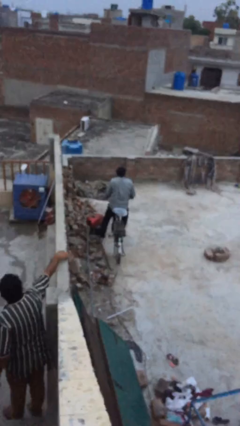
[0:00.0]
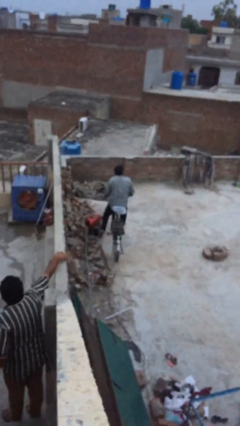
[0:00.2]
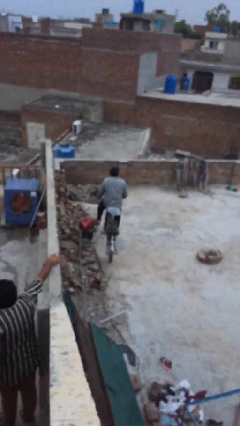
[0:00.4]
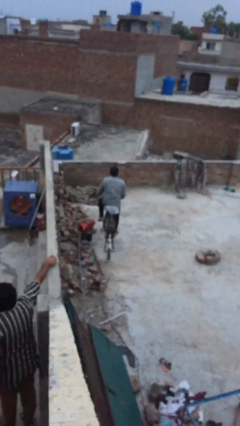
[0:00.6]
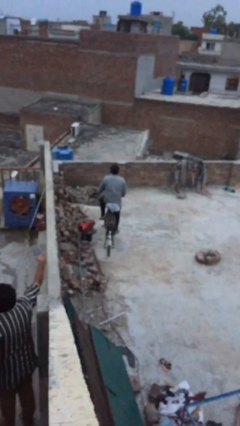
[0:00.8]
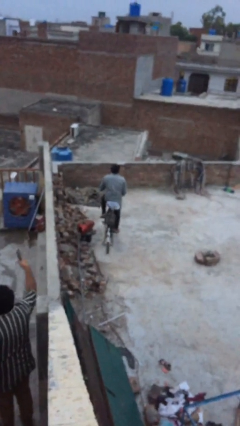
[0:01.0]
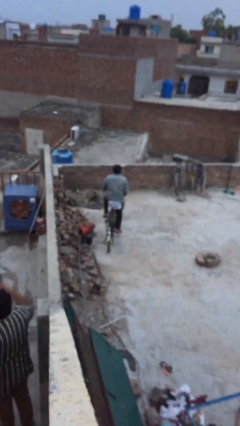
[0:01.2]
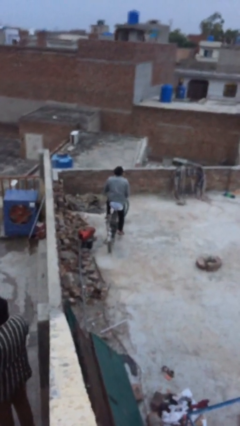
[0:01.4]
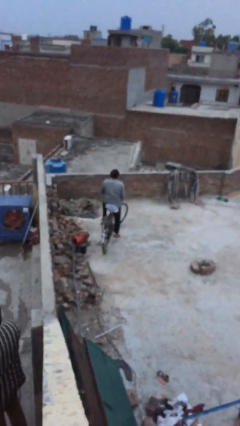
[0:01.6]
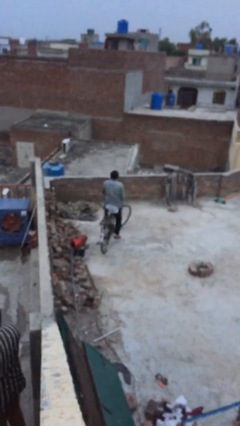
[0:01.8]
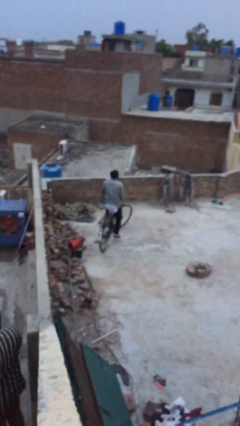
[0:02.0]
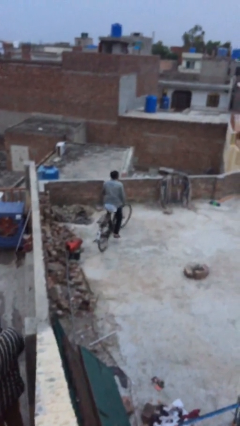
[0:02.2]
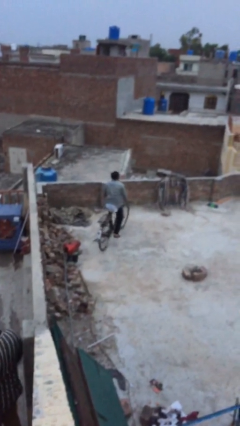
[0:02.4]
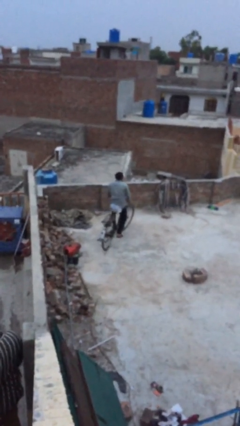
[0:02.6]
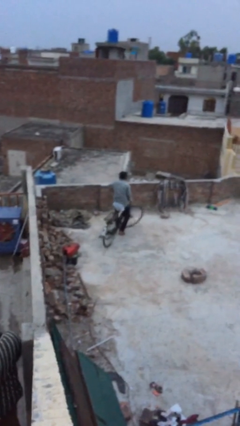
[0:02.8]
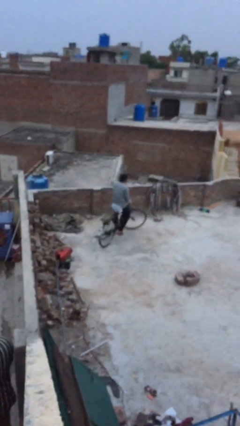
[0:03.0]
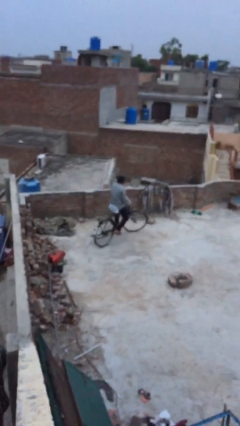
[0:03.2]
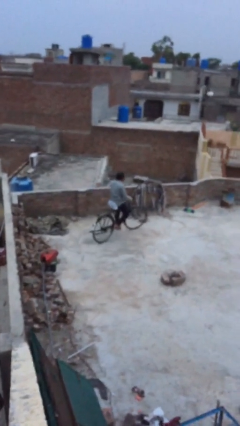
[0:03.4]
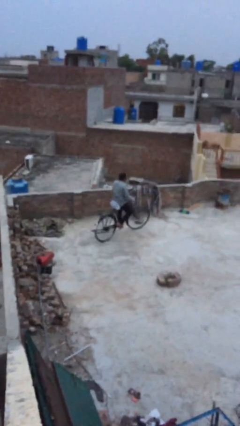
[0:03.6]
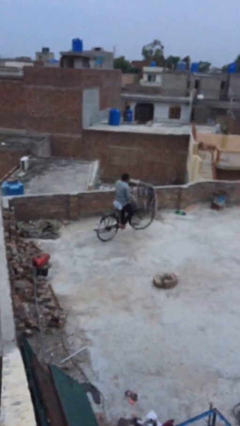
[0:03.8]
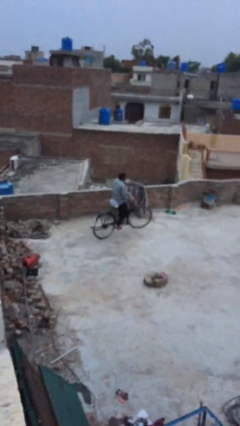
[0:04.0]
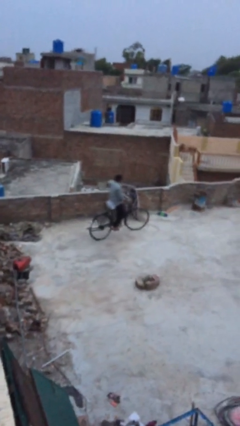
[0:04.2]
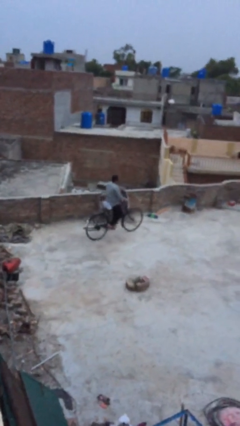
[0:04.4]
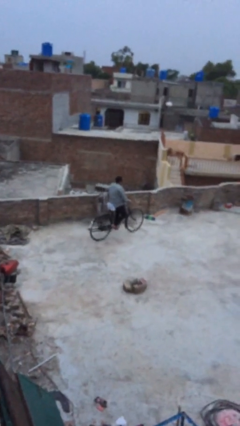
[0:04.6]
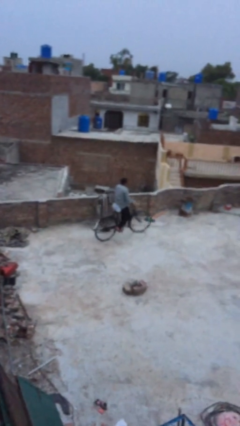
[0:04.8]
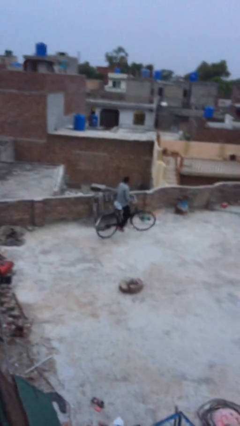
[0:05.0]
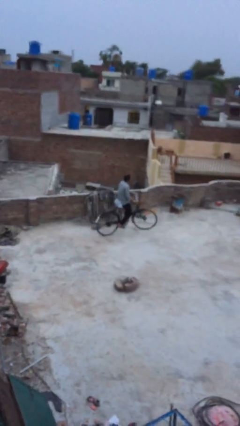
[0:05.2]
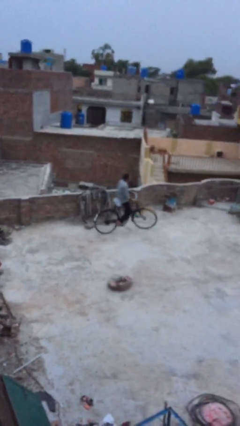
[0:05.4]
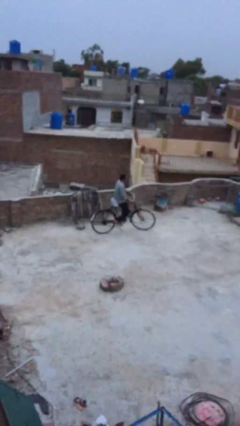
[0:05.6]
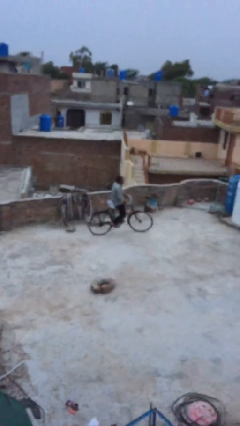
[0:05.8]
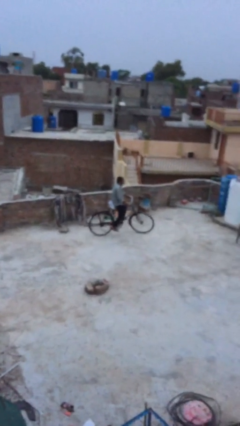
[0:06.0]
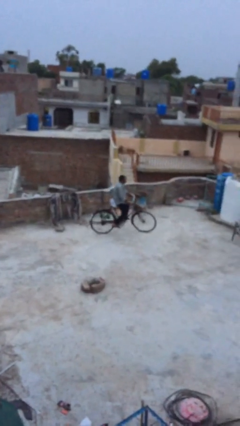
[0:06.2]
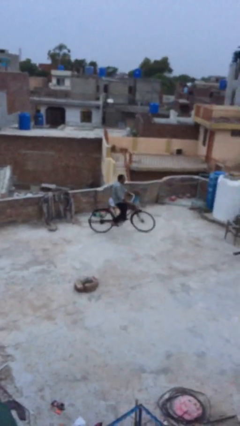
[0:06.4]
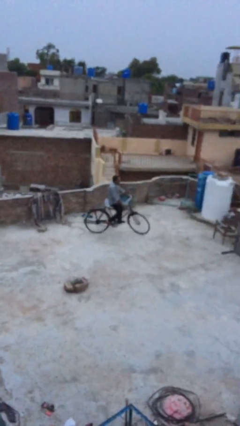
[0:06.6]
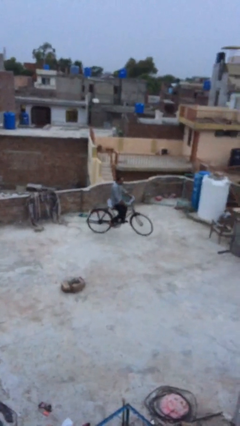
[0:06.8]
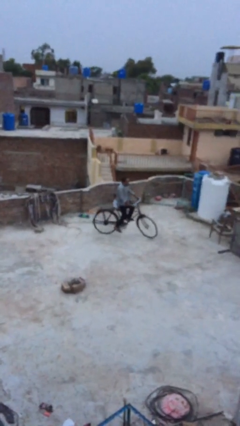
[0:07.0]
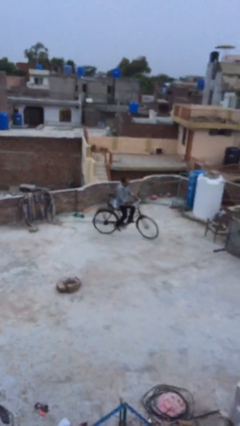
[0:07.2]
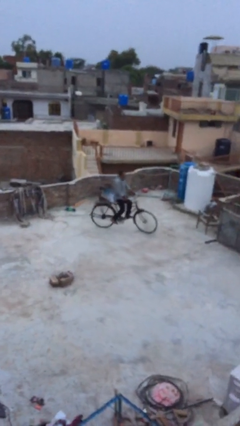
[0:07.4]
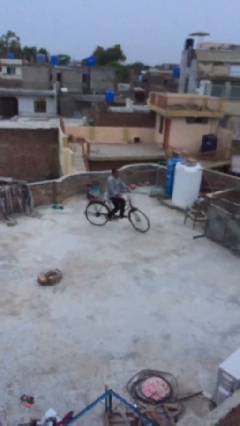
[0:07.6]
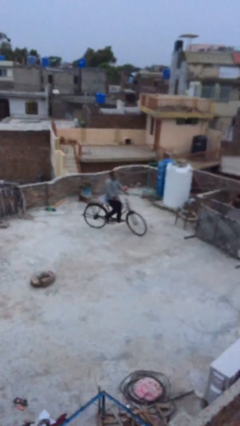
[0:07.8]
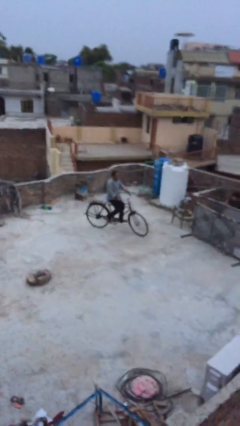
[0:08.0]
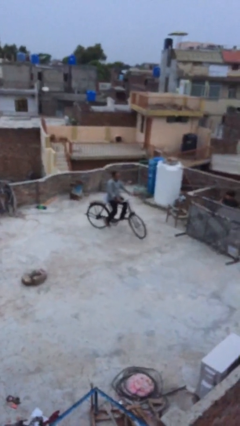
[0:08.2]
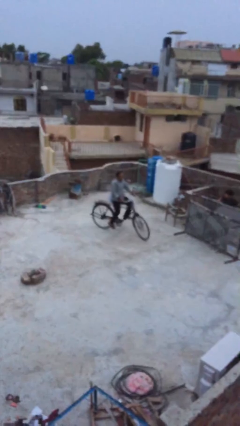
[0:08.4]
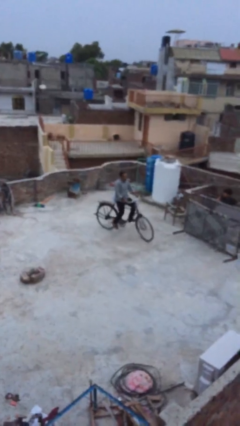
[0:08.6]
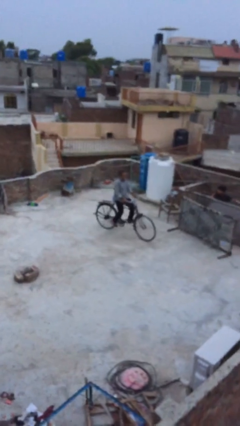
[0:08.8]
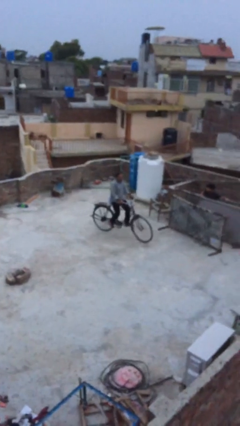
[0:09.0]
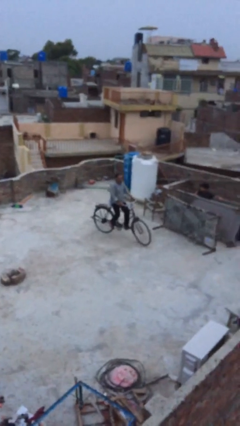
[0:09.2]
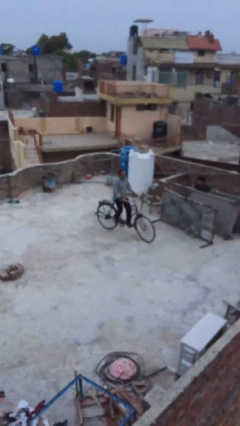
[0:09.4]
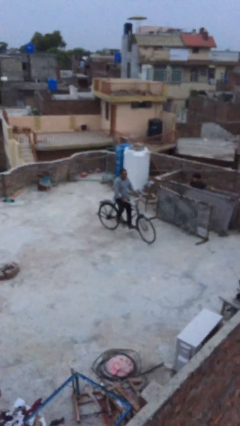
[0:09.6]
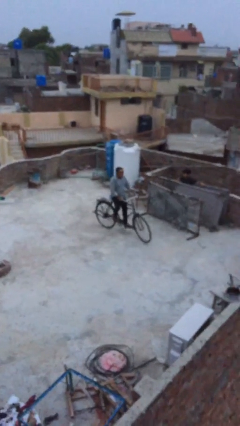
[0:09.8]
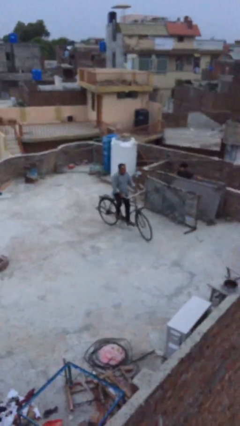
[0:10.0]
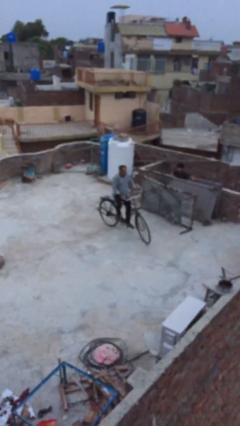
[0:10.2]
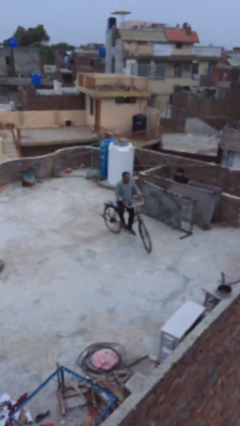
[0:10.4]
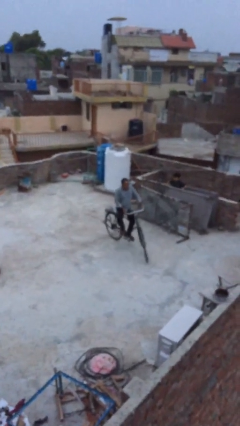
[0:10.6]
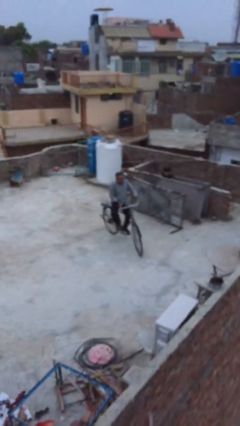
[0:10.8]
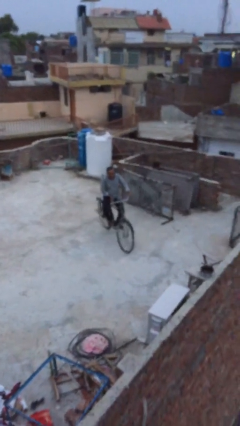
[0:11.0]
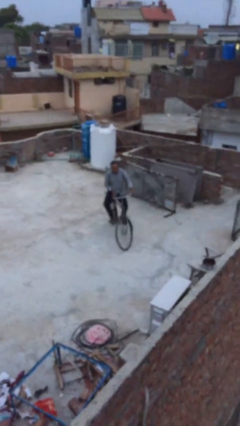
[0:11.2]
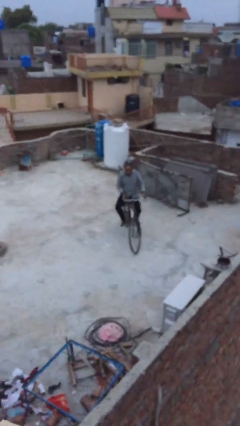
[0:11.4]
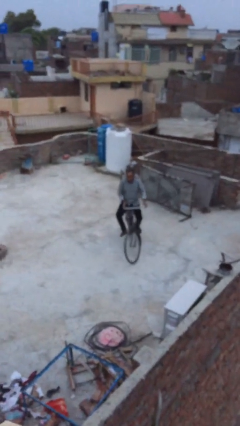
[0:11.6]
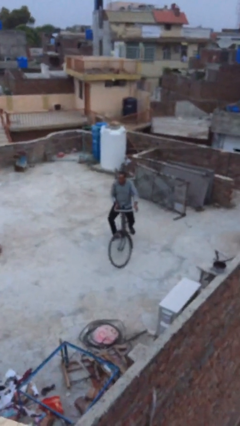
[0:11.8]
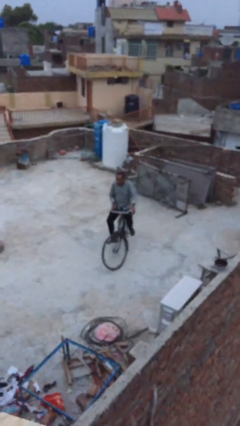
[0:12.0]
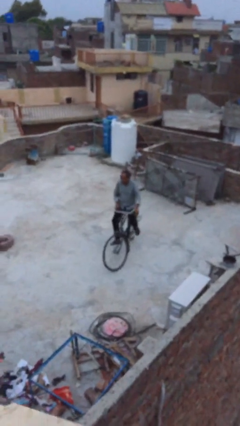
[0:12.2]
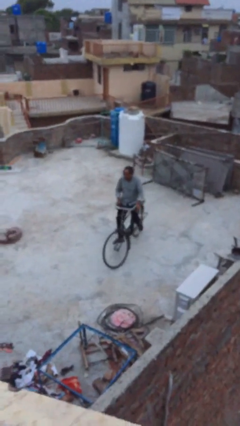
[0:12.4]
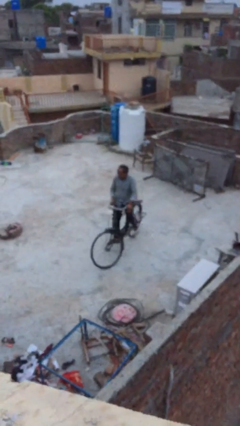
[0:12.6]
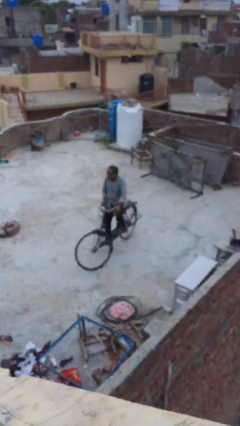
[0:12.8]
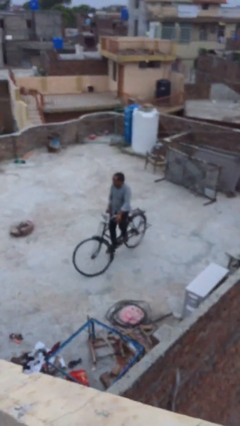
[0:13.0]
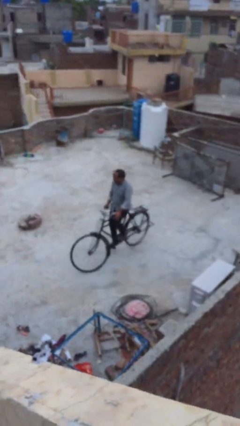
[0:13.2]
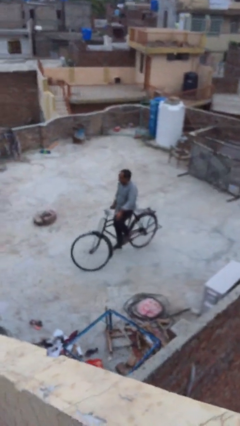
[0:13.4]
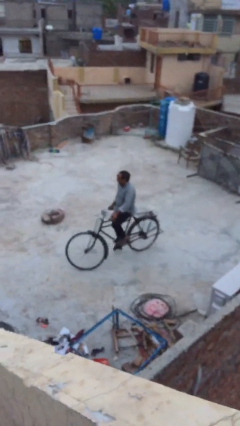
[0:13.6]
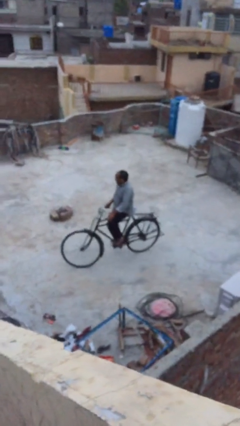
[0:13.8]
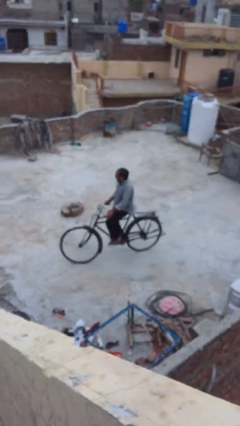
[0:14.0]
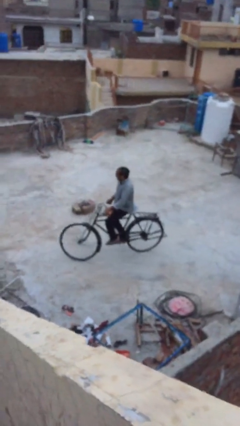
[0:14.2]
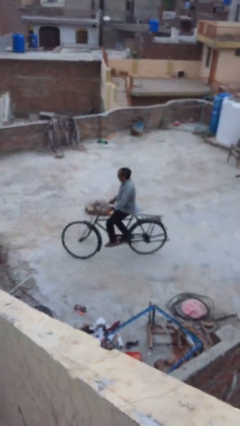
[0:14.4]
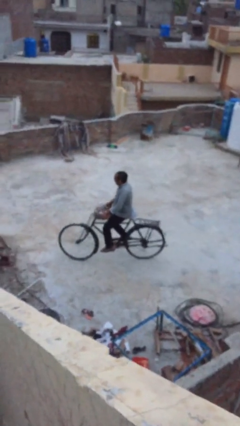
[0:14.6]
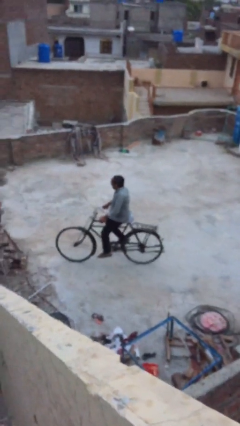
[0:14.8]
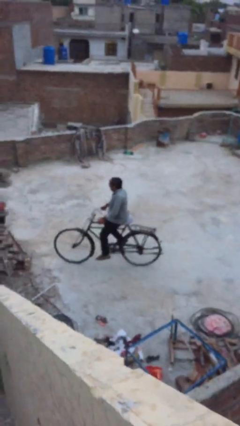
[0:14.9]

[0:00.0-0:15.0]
person rides bicycle

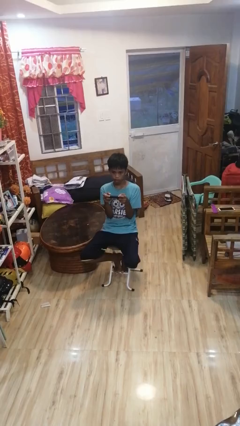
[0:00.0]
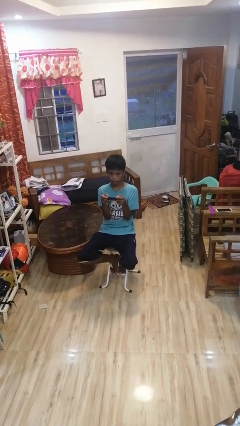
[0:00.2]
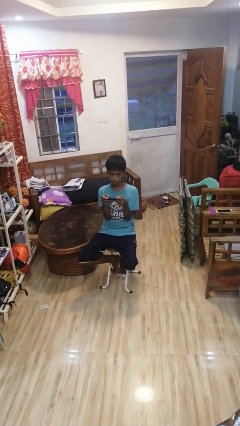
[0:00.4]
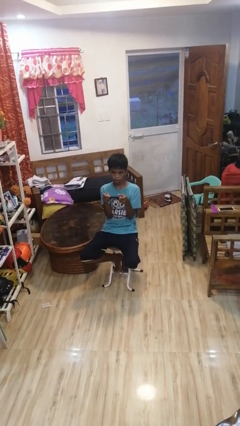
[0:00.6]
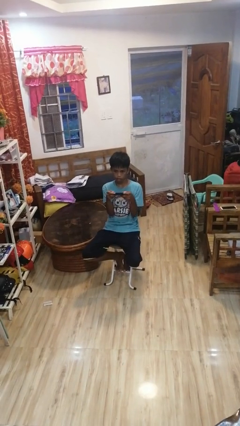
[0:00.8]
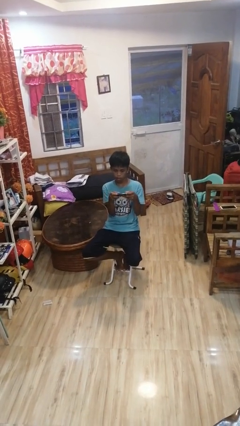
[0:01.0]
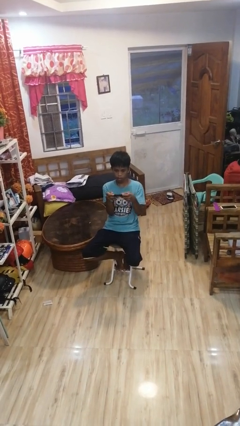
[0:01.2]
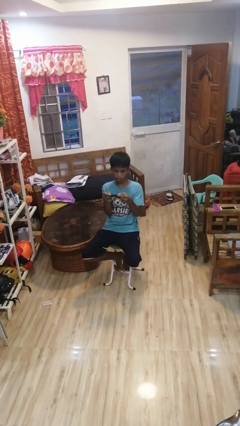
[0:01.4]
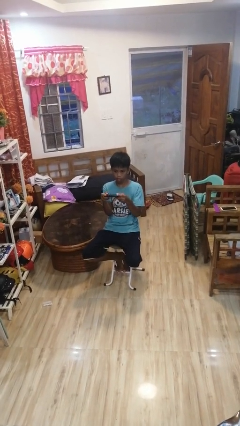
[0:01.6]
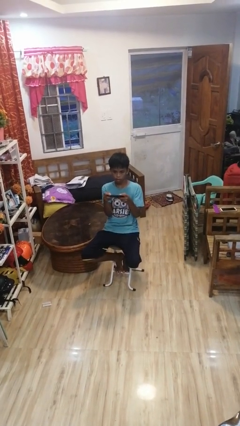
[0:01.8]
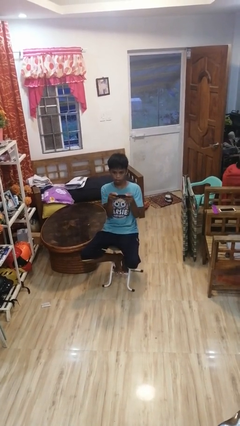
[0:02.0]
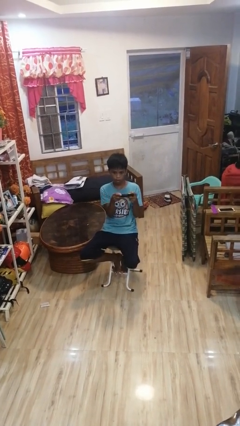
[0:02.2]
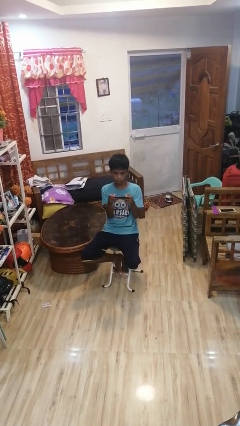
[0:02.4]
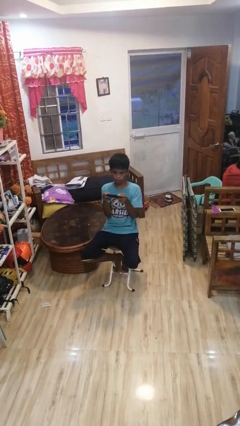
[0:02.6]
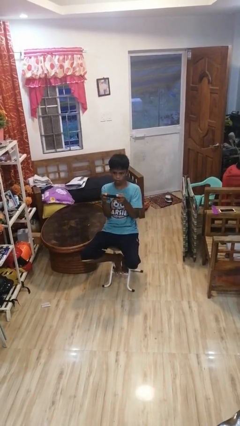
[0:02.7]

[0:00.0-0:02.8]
person interacts with handheld game

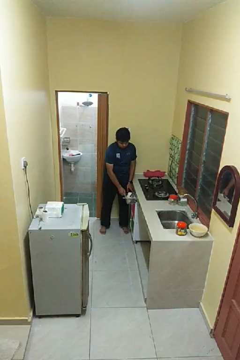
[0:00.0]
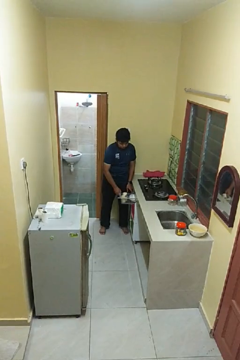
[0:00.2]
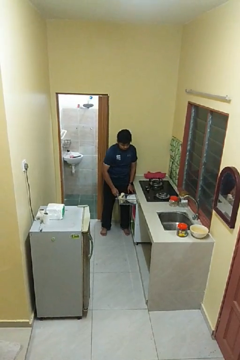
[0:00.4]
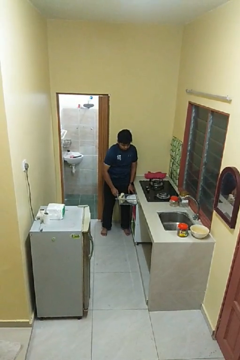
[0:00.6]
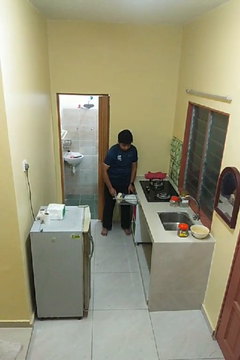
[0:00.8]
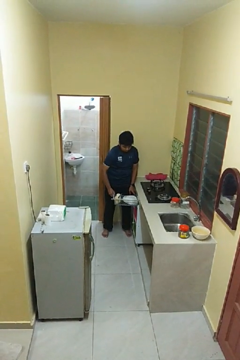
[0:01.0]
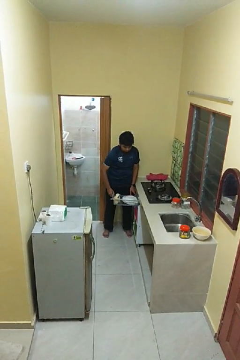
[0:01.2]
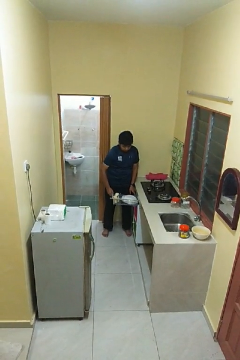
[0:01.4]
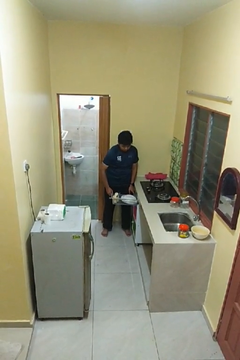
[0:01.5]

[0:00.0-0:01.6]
person opens kitchen drawer
